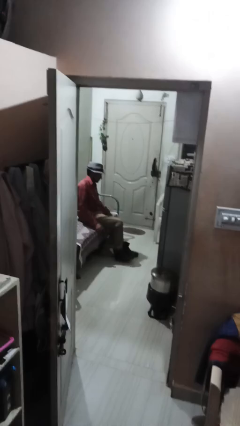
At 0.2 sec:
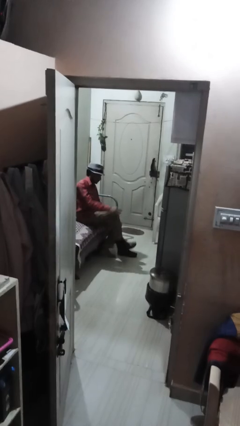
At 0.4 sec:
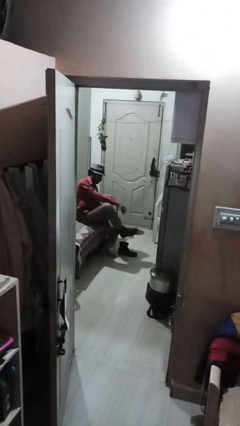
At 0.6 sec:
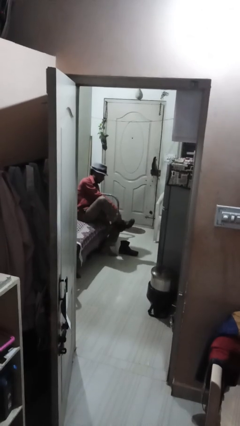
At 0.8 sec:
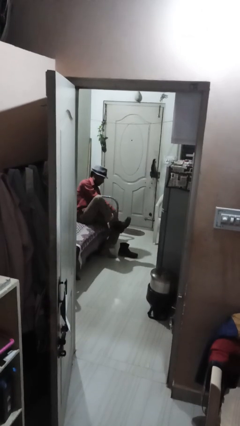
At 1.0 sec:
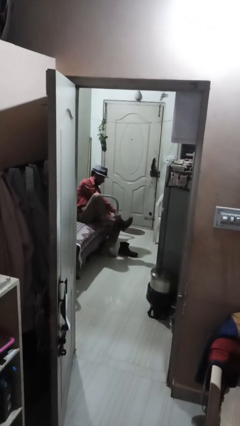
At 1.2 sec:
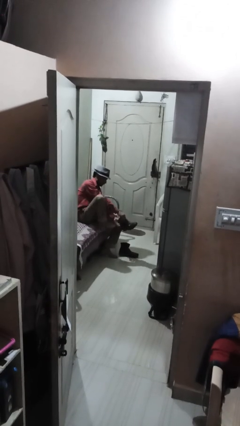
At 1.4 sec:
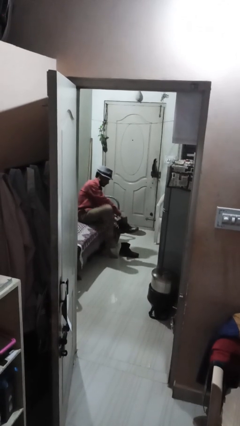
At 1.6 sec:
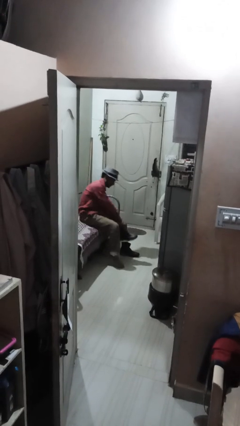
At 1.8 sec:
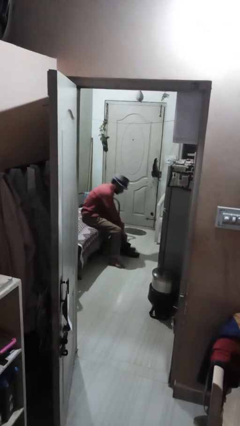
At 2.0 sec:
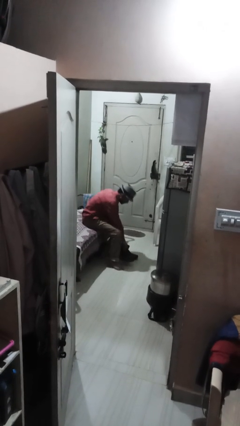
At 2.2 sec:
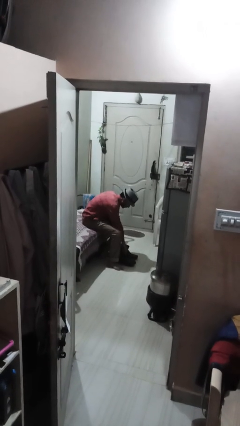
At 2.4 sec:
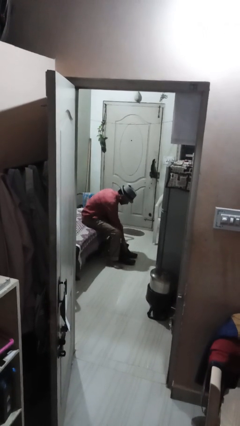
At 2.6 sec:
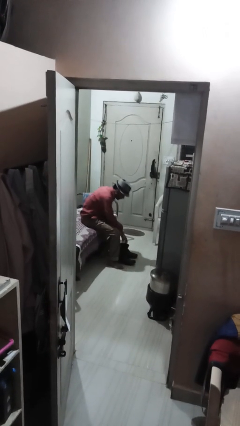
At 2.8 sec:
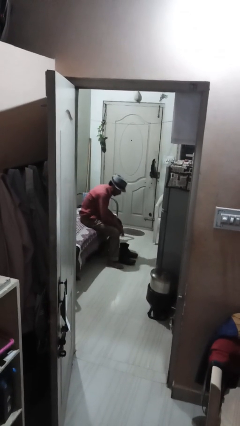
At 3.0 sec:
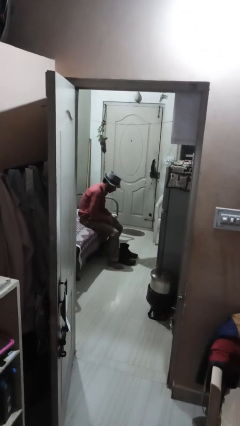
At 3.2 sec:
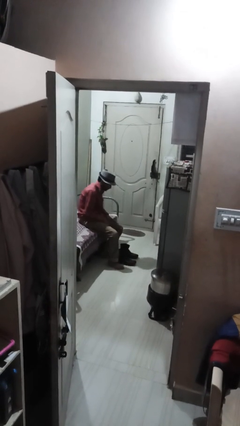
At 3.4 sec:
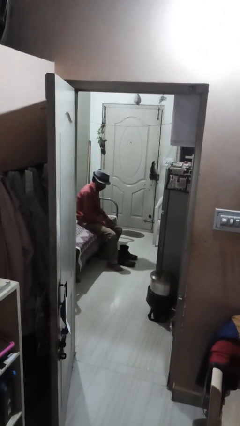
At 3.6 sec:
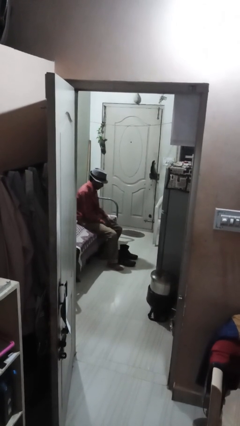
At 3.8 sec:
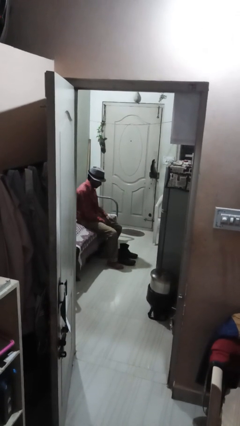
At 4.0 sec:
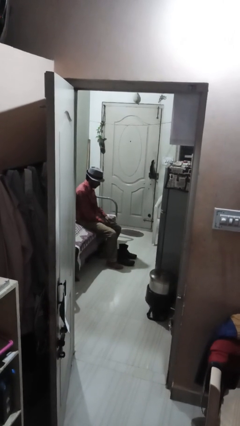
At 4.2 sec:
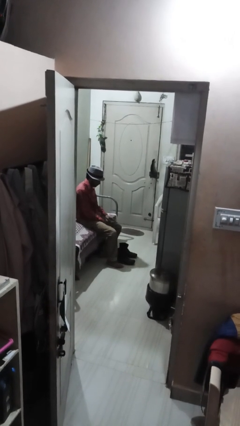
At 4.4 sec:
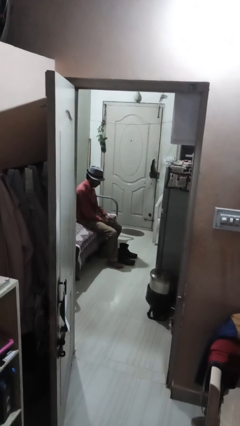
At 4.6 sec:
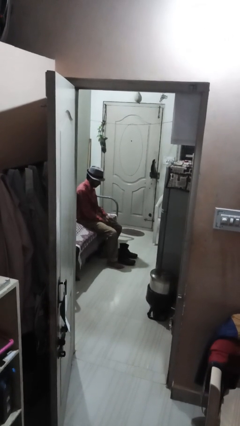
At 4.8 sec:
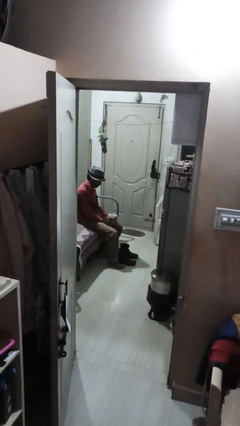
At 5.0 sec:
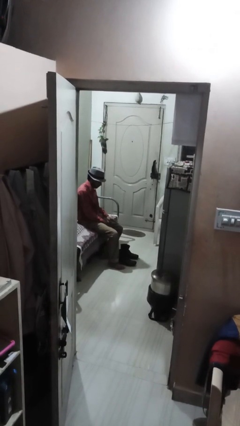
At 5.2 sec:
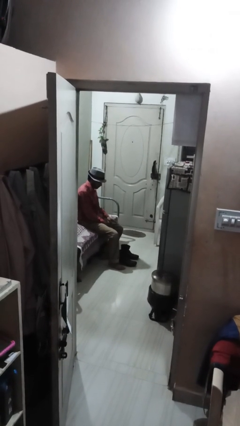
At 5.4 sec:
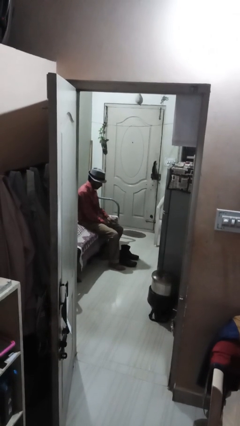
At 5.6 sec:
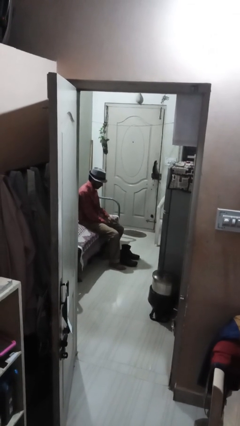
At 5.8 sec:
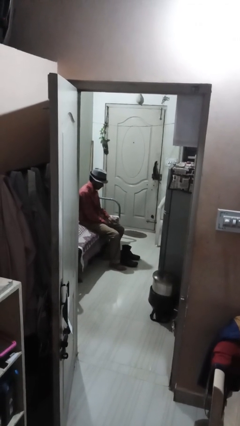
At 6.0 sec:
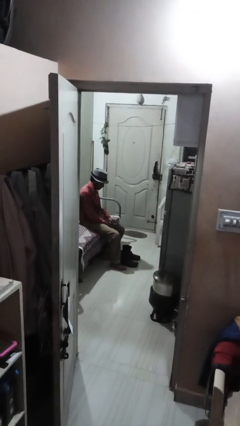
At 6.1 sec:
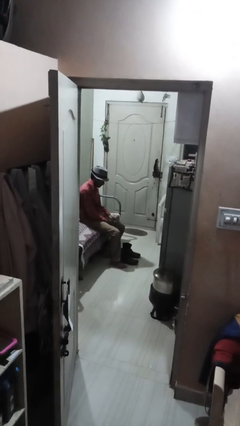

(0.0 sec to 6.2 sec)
person takes off boots

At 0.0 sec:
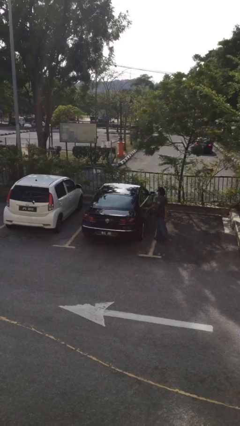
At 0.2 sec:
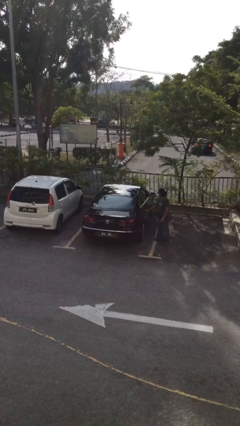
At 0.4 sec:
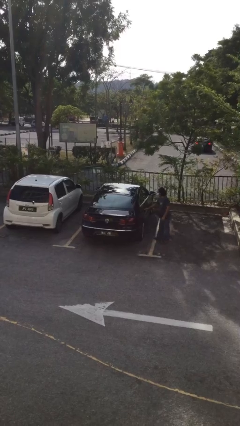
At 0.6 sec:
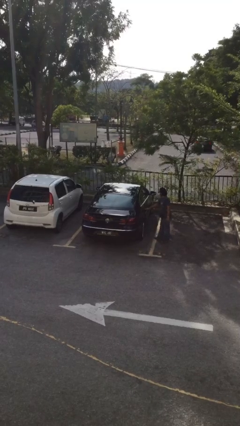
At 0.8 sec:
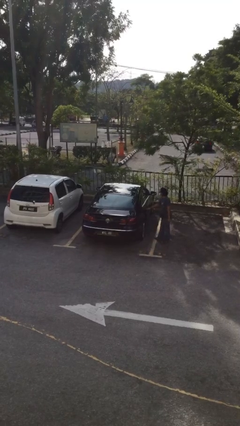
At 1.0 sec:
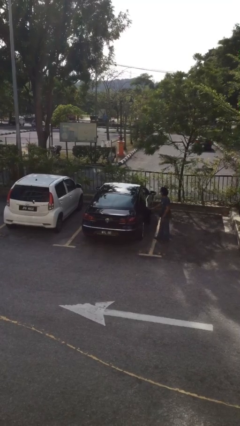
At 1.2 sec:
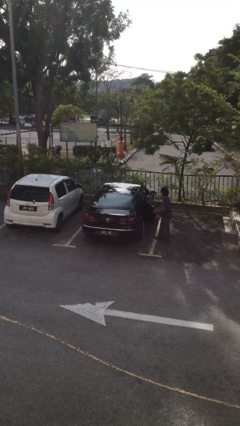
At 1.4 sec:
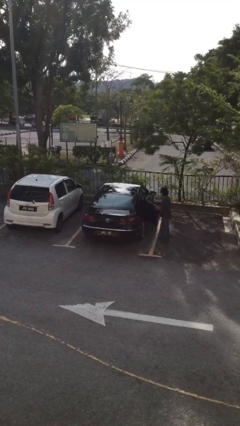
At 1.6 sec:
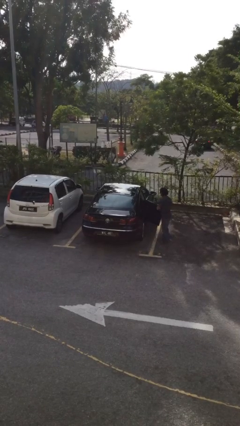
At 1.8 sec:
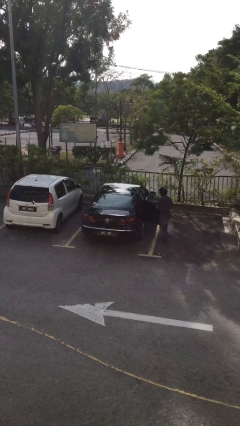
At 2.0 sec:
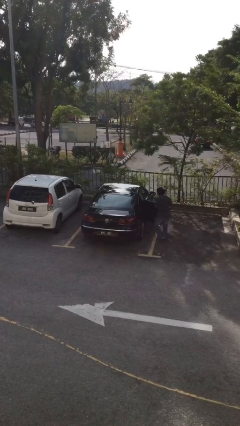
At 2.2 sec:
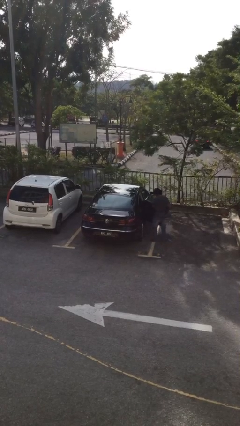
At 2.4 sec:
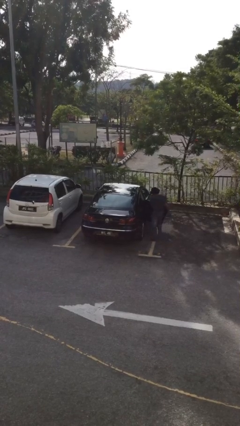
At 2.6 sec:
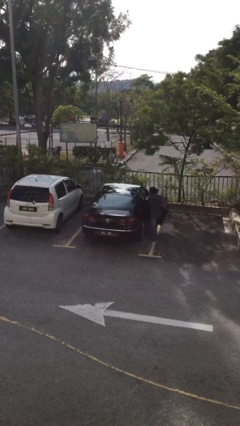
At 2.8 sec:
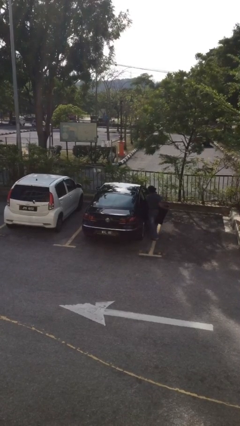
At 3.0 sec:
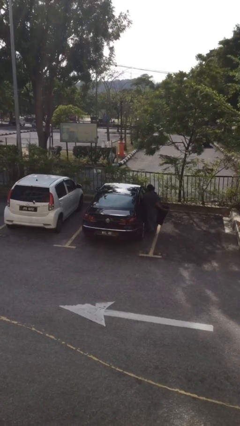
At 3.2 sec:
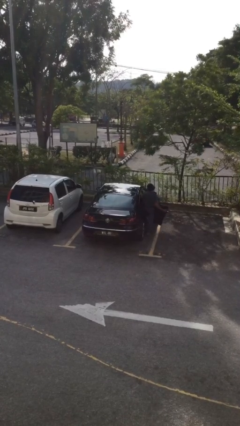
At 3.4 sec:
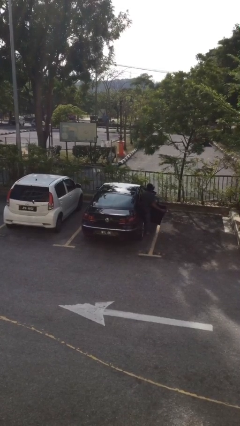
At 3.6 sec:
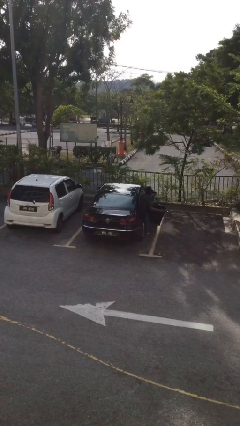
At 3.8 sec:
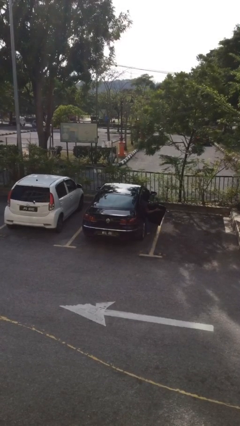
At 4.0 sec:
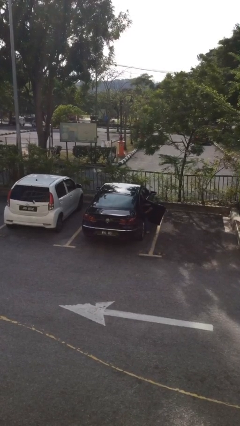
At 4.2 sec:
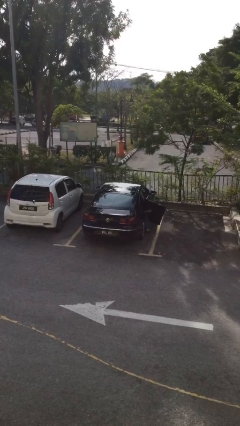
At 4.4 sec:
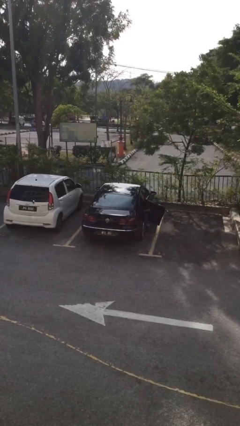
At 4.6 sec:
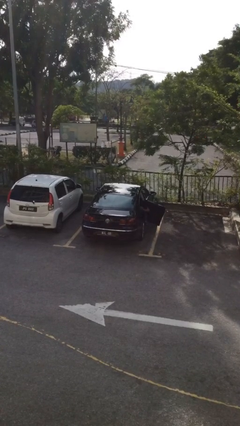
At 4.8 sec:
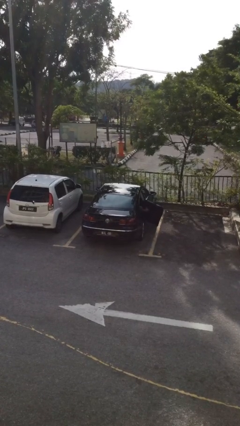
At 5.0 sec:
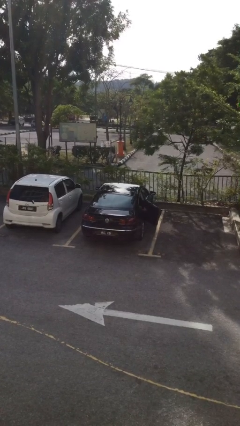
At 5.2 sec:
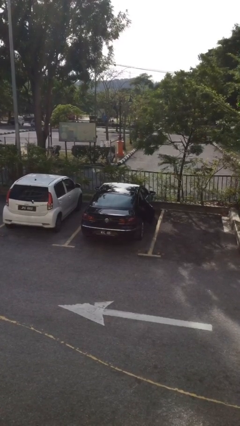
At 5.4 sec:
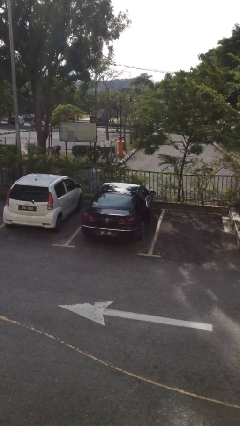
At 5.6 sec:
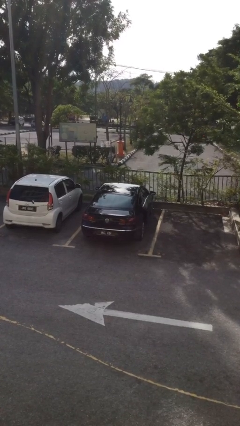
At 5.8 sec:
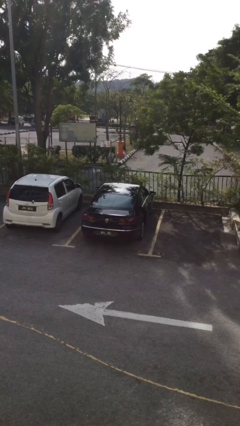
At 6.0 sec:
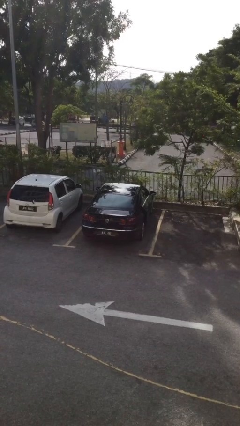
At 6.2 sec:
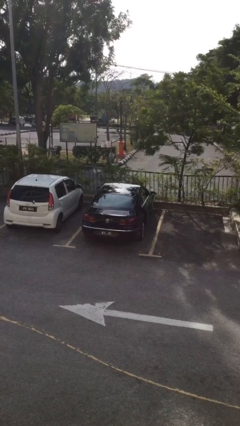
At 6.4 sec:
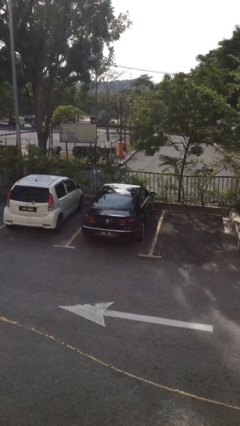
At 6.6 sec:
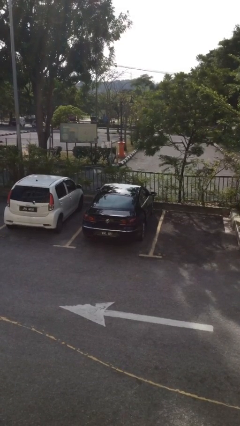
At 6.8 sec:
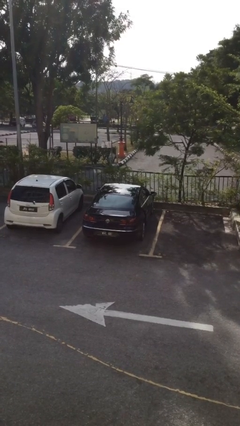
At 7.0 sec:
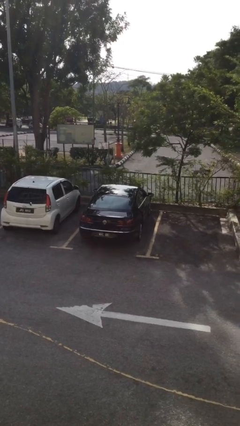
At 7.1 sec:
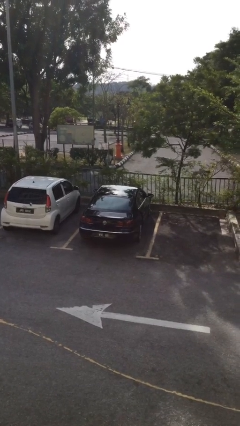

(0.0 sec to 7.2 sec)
car picks up person

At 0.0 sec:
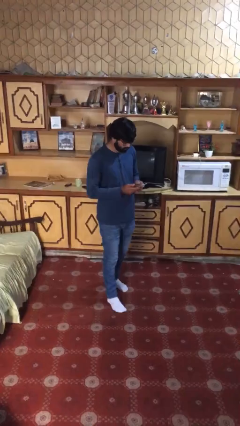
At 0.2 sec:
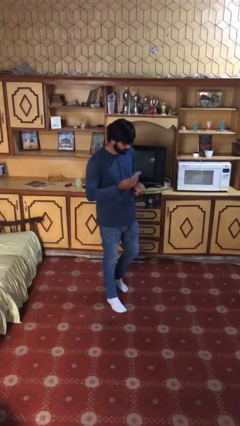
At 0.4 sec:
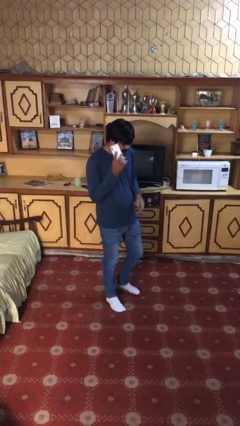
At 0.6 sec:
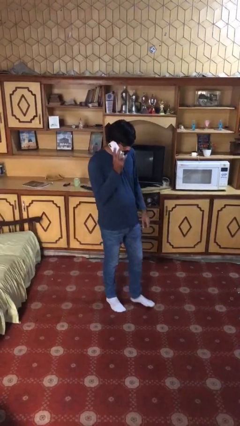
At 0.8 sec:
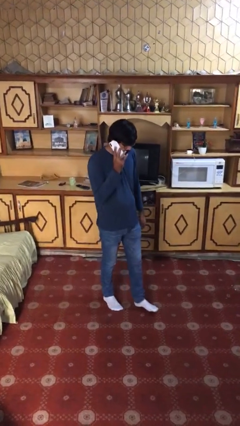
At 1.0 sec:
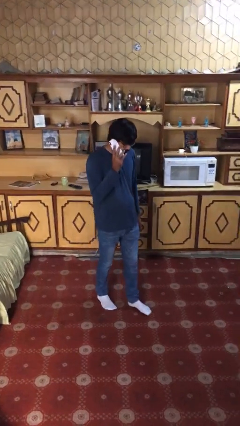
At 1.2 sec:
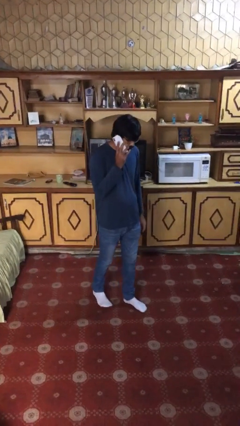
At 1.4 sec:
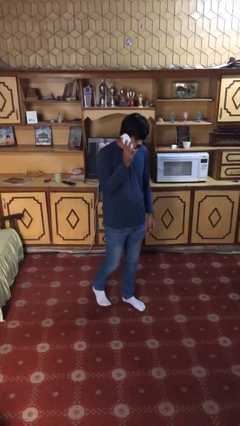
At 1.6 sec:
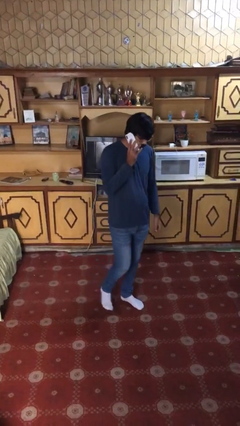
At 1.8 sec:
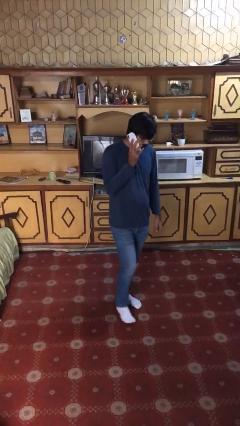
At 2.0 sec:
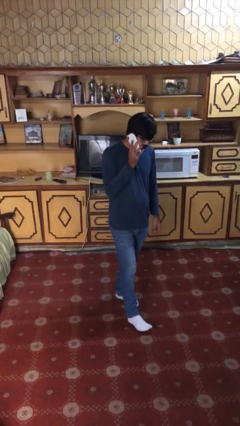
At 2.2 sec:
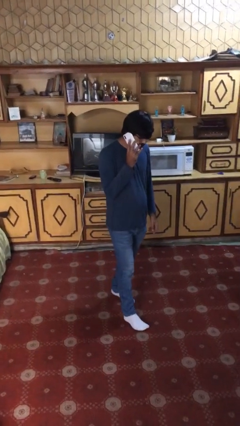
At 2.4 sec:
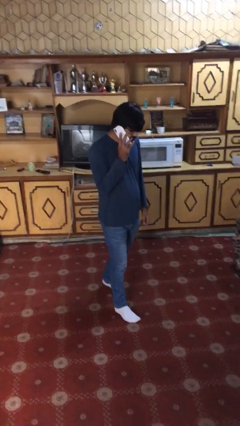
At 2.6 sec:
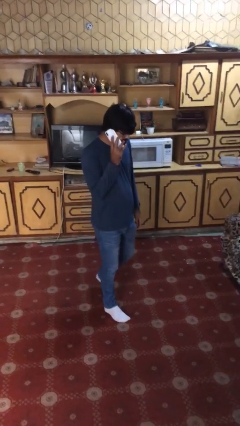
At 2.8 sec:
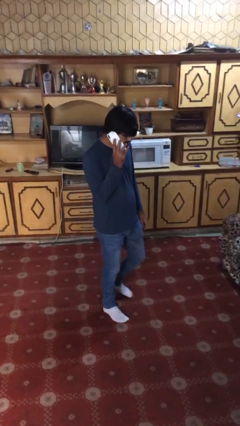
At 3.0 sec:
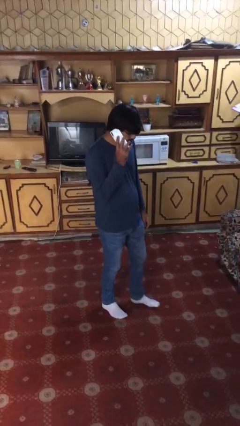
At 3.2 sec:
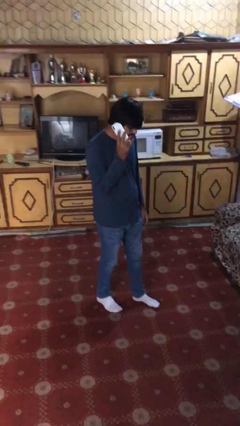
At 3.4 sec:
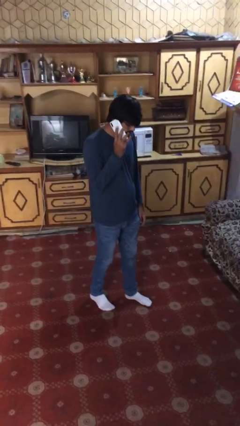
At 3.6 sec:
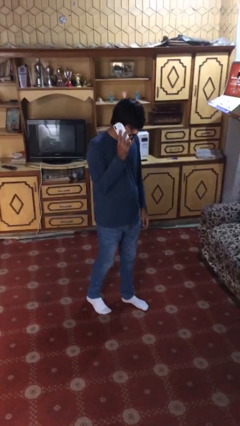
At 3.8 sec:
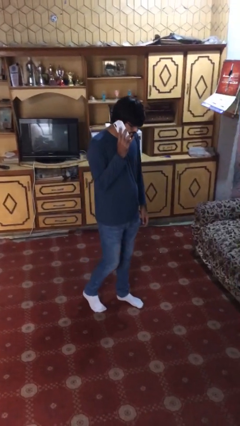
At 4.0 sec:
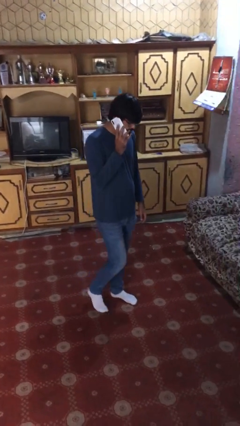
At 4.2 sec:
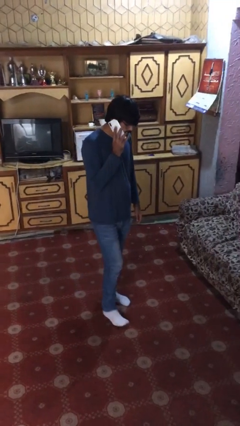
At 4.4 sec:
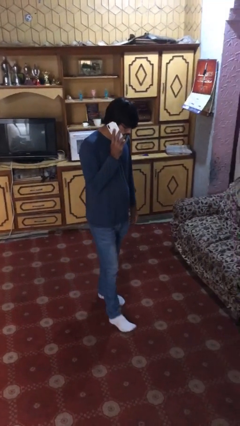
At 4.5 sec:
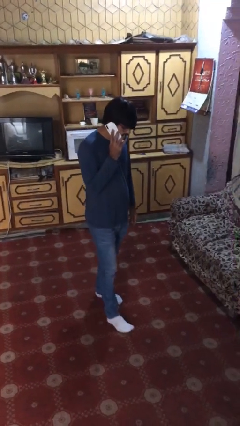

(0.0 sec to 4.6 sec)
person talks on phone
